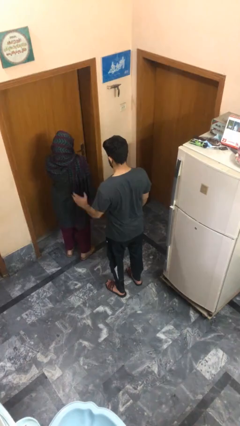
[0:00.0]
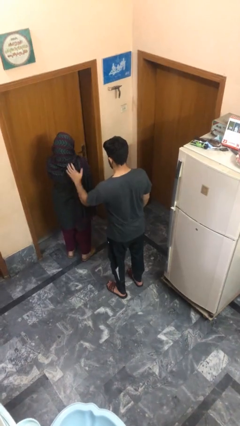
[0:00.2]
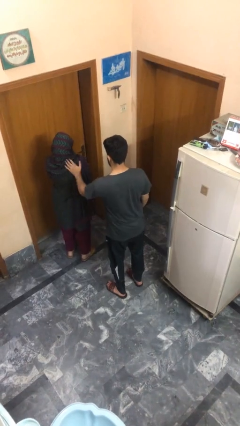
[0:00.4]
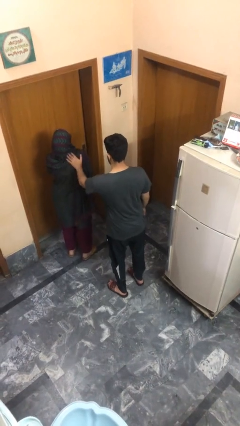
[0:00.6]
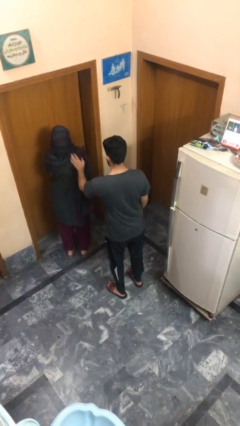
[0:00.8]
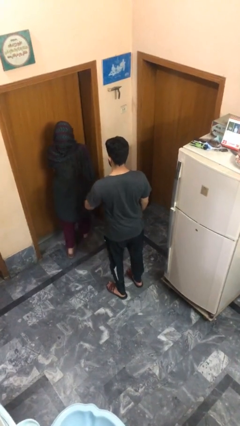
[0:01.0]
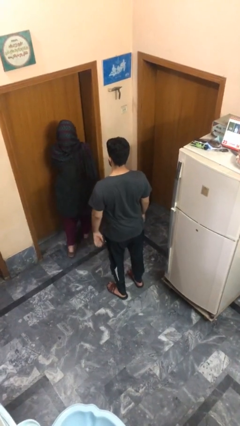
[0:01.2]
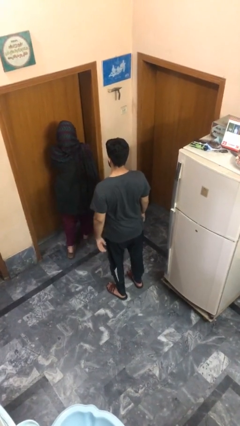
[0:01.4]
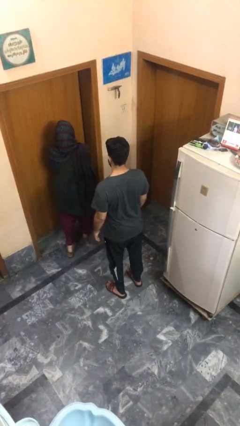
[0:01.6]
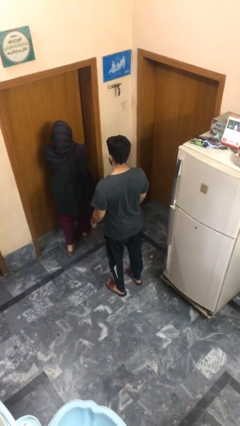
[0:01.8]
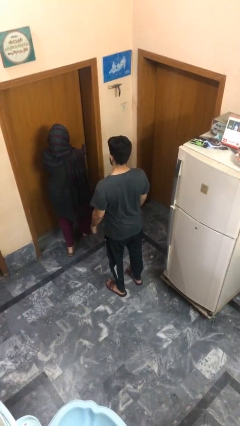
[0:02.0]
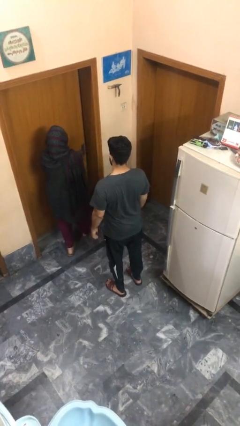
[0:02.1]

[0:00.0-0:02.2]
person shoves person

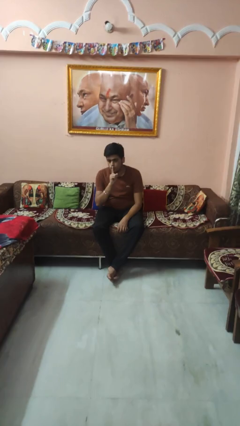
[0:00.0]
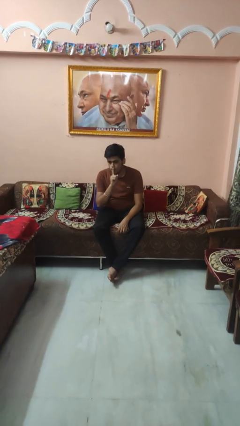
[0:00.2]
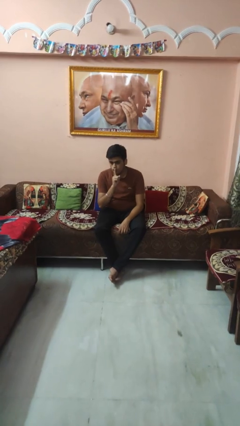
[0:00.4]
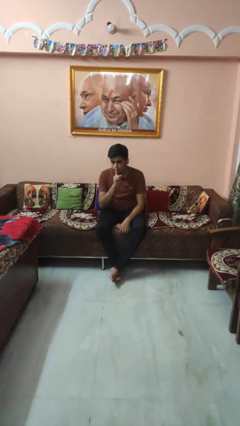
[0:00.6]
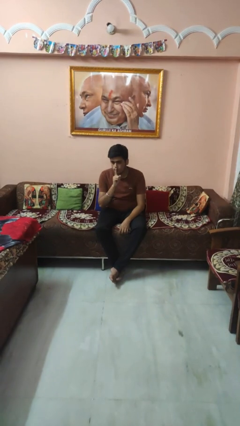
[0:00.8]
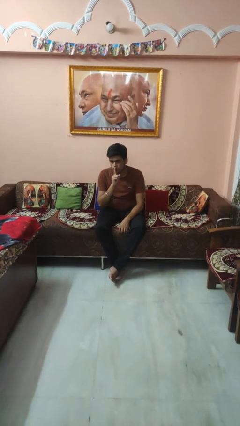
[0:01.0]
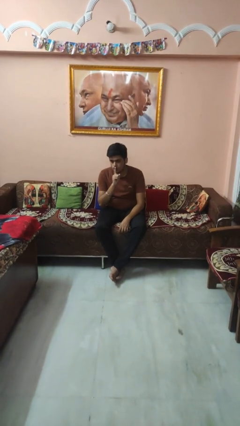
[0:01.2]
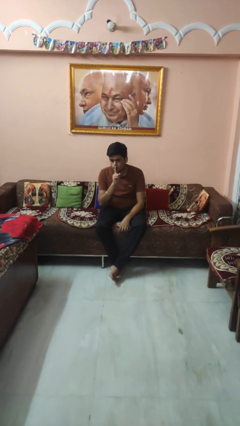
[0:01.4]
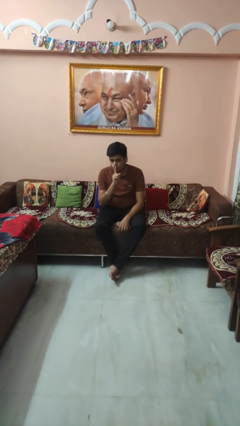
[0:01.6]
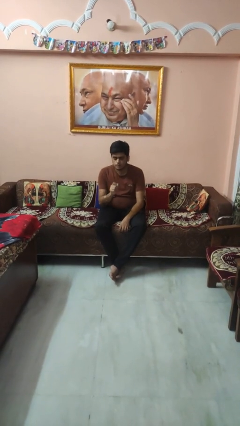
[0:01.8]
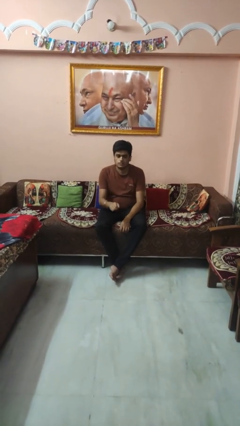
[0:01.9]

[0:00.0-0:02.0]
person gestures be quiet

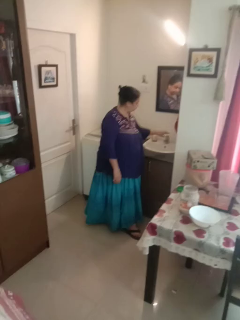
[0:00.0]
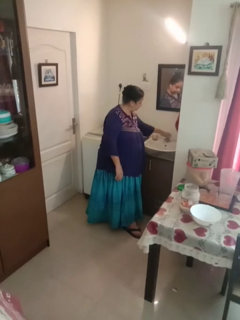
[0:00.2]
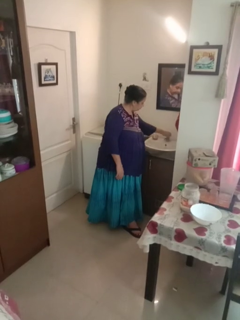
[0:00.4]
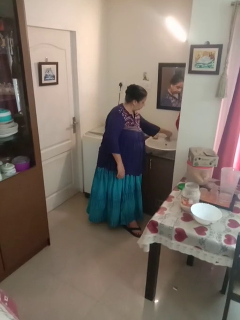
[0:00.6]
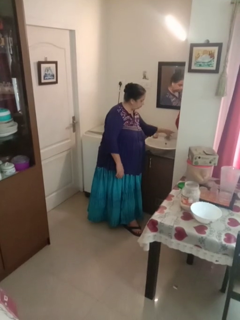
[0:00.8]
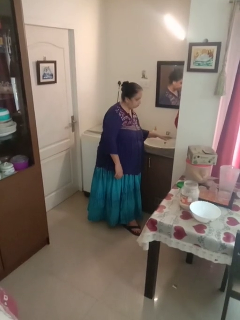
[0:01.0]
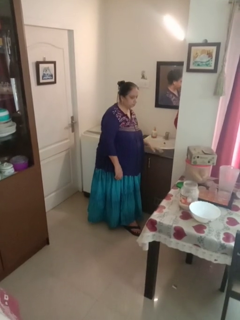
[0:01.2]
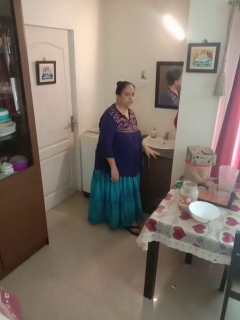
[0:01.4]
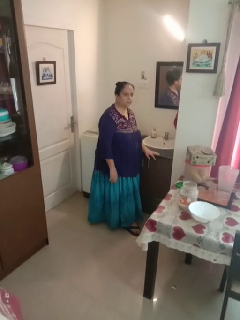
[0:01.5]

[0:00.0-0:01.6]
person turns on faucet

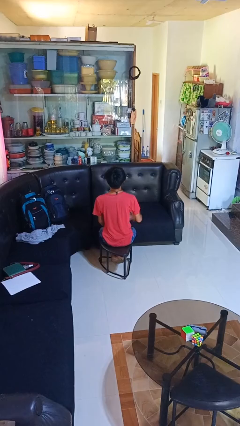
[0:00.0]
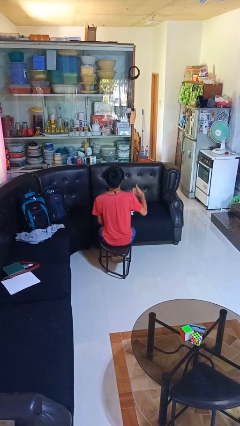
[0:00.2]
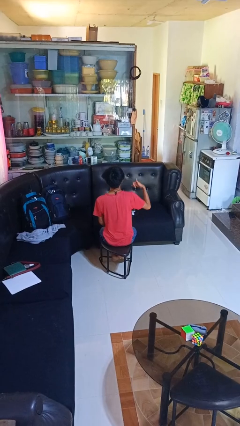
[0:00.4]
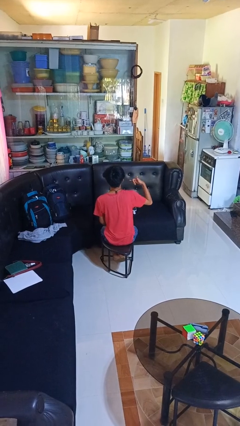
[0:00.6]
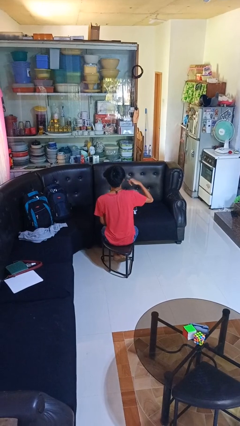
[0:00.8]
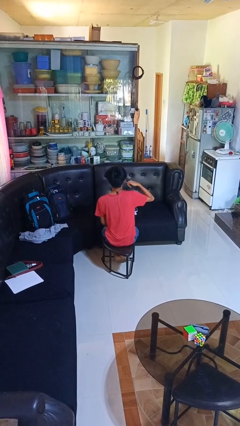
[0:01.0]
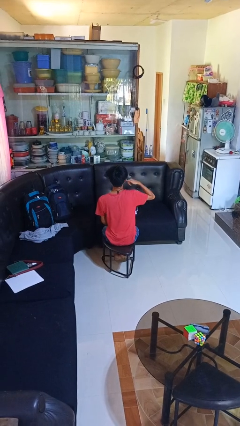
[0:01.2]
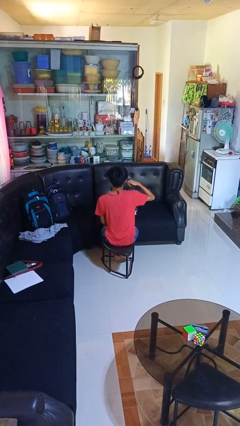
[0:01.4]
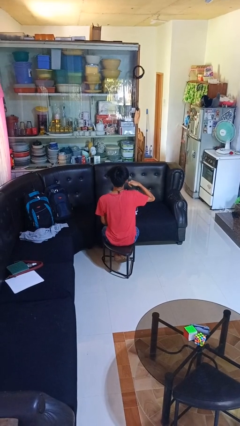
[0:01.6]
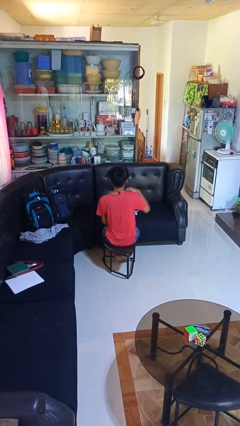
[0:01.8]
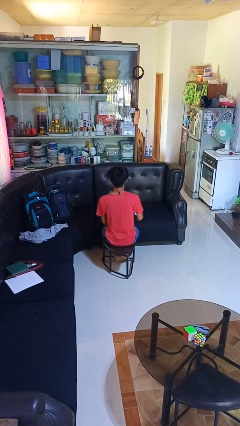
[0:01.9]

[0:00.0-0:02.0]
person gestures call me

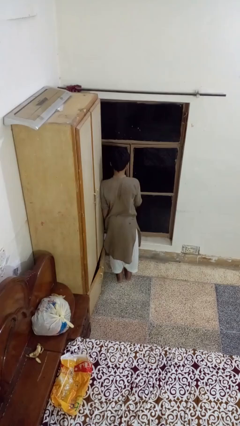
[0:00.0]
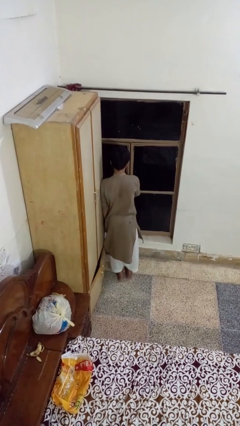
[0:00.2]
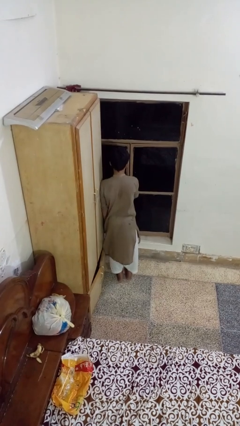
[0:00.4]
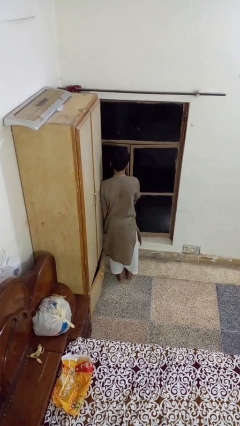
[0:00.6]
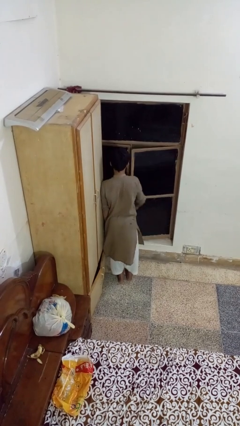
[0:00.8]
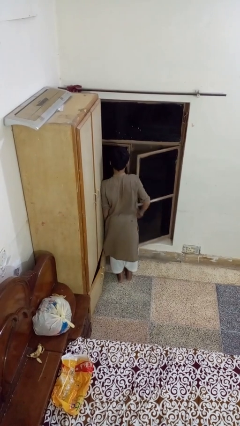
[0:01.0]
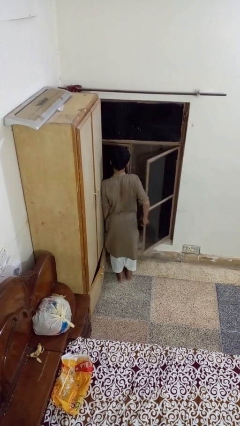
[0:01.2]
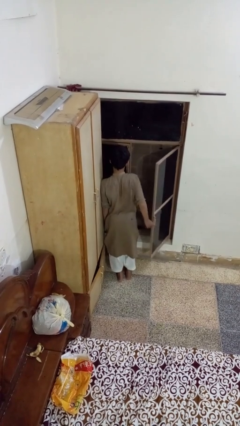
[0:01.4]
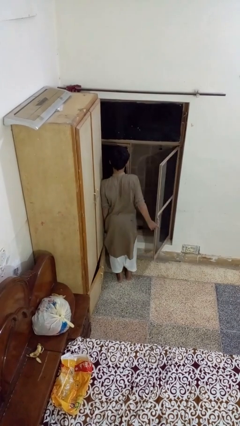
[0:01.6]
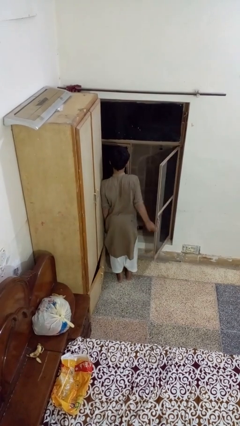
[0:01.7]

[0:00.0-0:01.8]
person opens home window

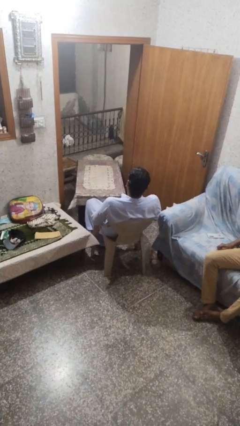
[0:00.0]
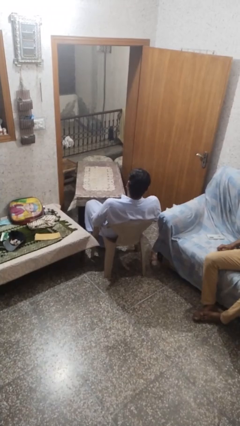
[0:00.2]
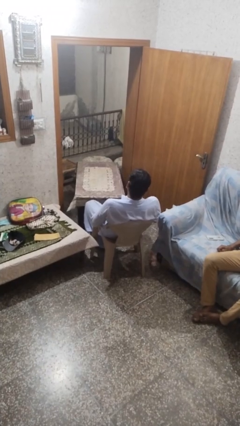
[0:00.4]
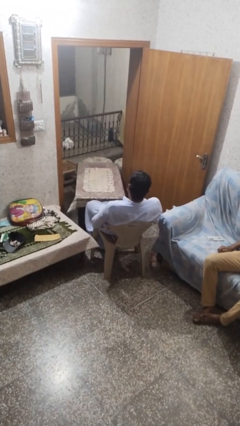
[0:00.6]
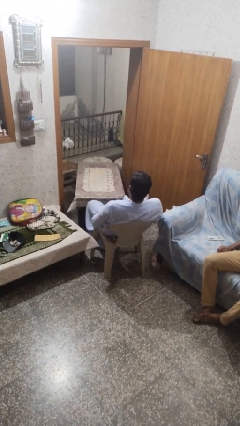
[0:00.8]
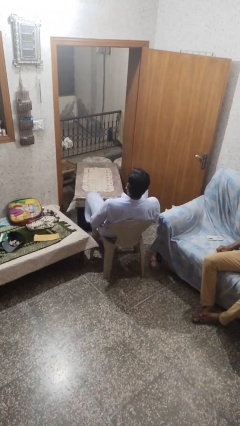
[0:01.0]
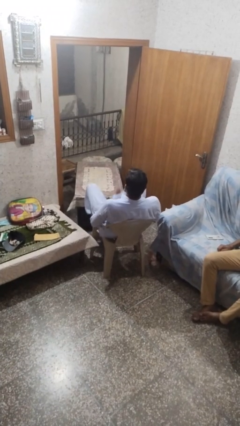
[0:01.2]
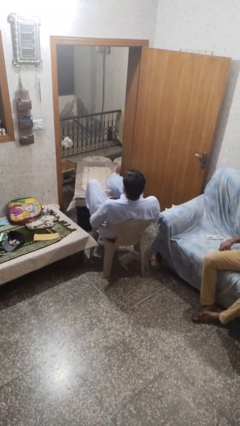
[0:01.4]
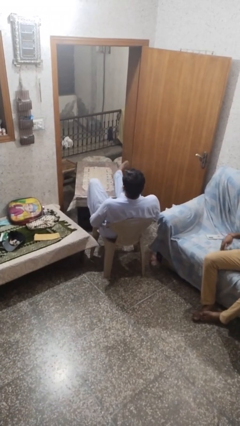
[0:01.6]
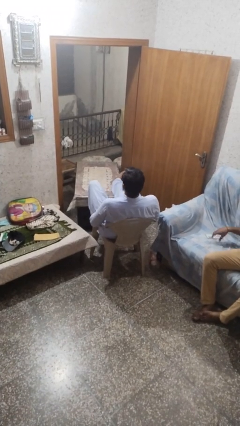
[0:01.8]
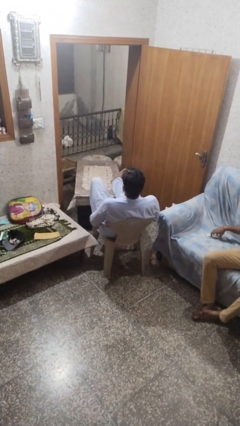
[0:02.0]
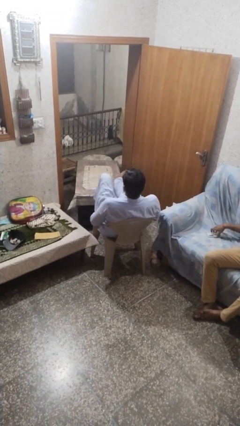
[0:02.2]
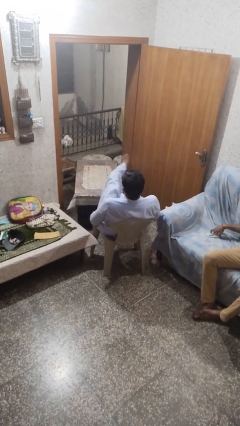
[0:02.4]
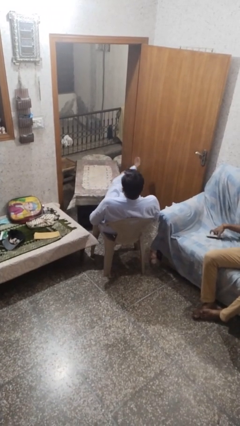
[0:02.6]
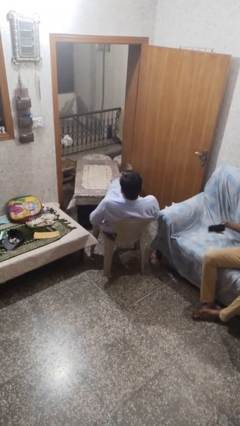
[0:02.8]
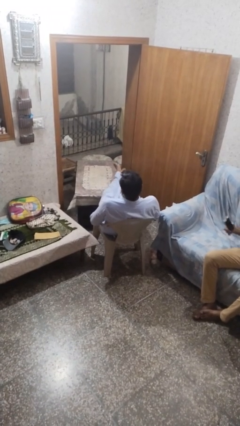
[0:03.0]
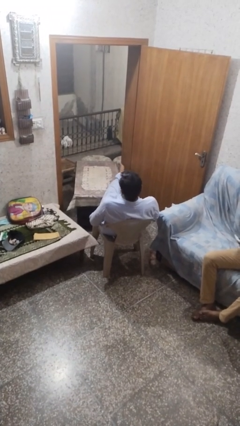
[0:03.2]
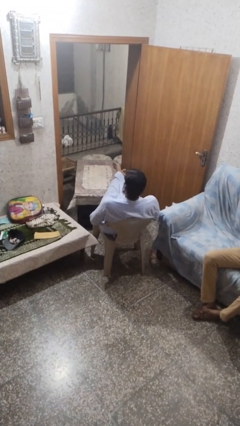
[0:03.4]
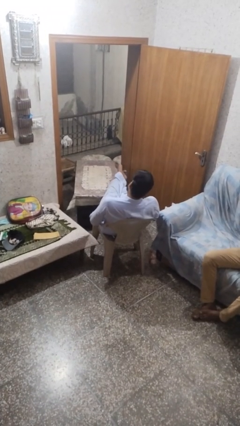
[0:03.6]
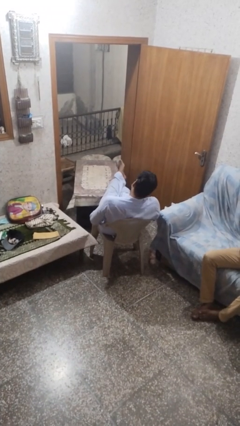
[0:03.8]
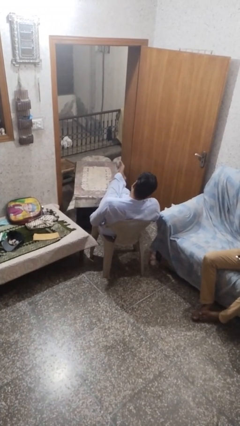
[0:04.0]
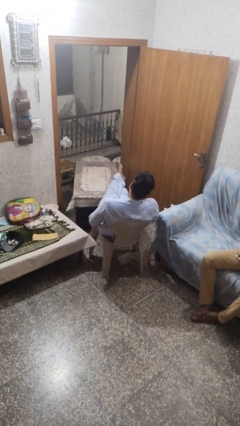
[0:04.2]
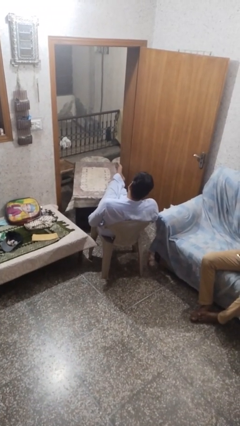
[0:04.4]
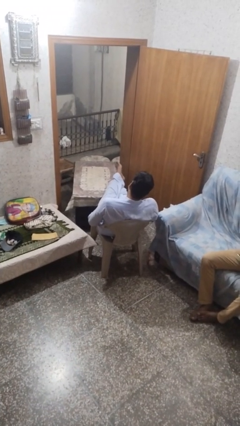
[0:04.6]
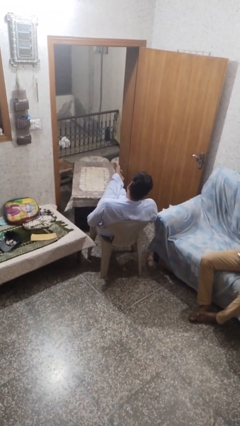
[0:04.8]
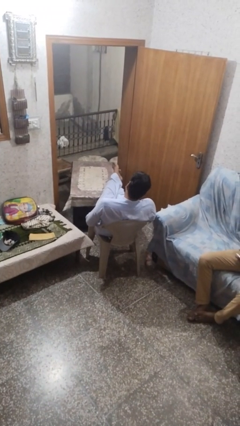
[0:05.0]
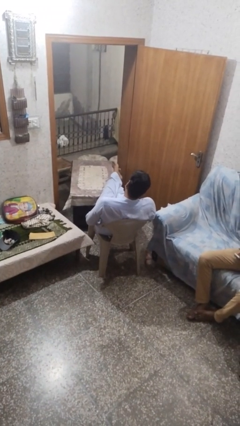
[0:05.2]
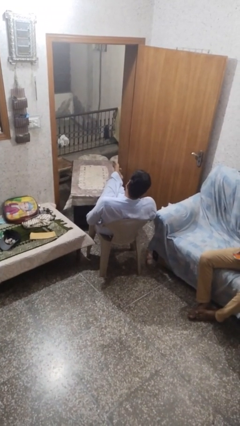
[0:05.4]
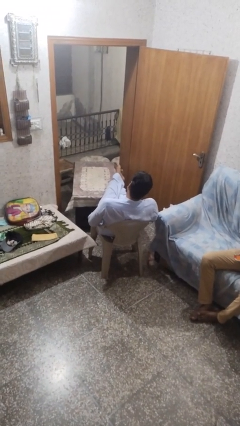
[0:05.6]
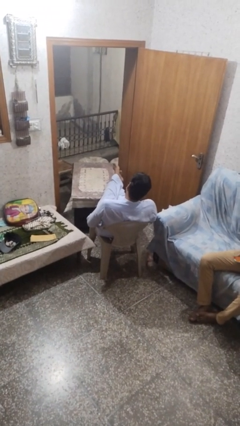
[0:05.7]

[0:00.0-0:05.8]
person puts feet up

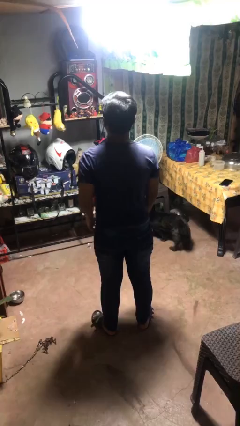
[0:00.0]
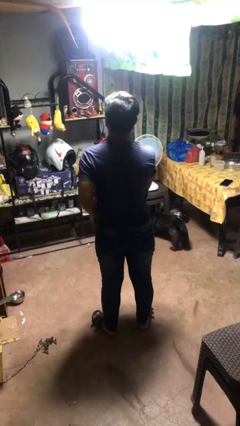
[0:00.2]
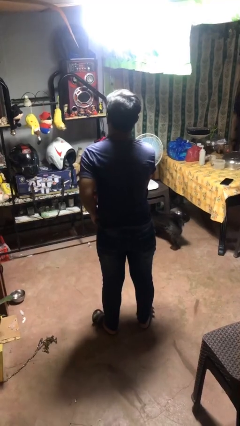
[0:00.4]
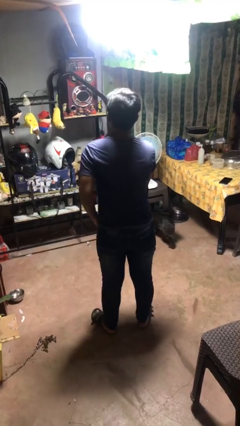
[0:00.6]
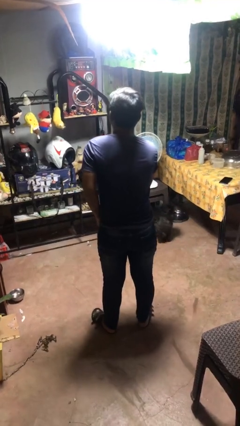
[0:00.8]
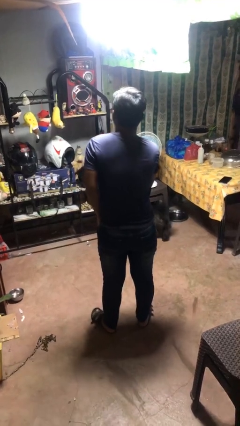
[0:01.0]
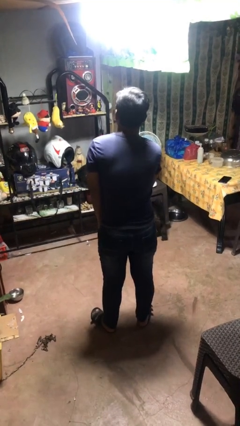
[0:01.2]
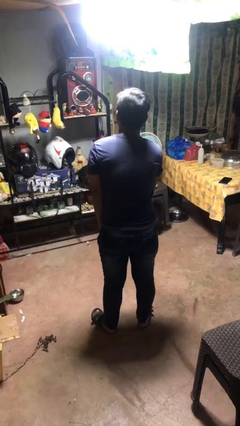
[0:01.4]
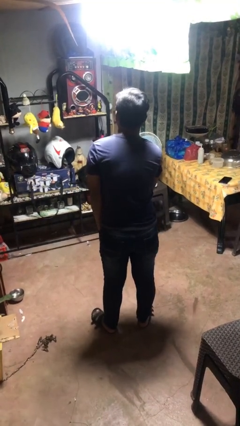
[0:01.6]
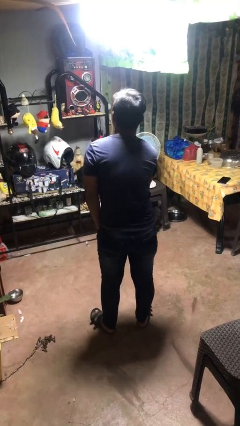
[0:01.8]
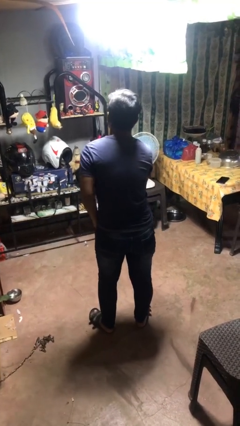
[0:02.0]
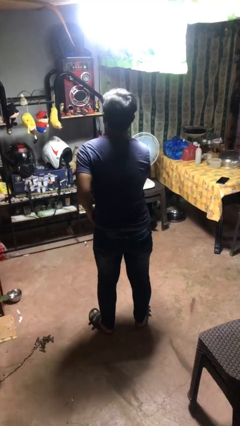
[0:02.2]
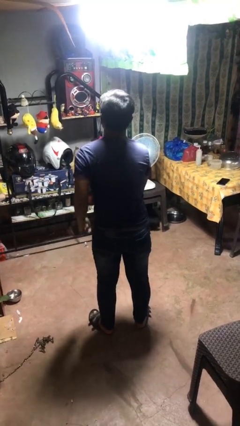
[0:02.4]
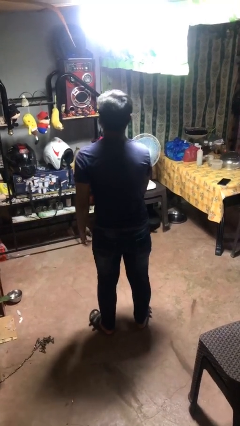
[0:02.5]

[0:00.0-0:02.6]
person puts hands in back pockets
